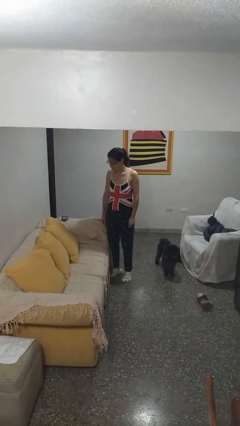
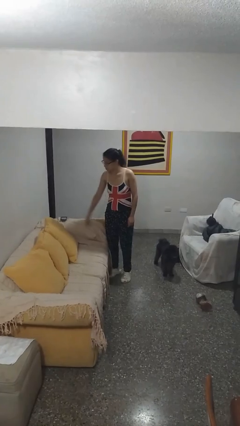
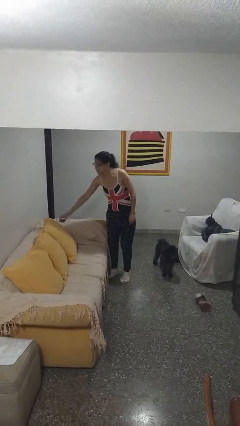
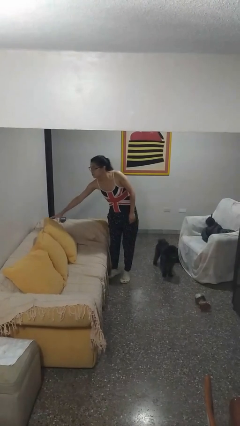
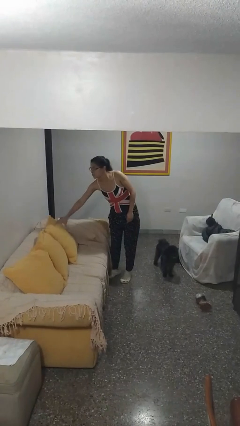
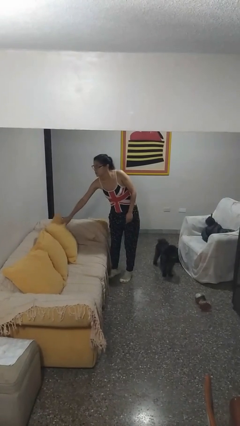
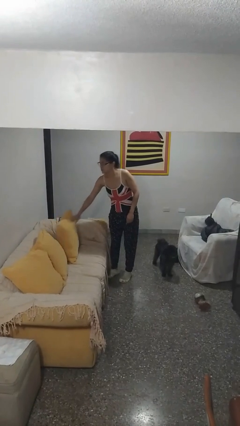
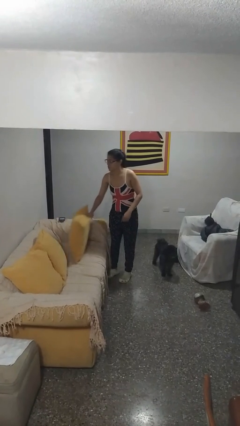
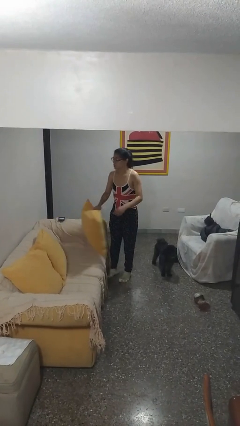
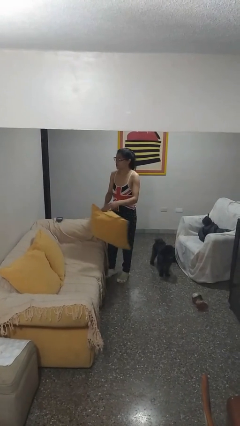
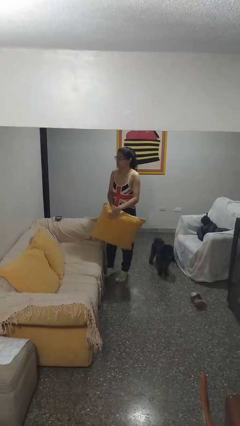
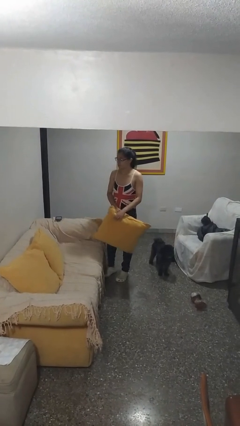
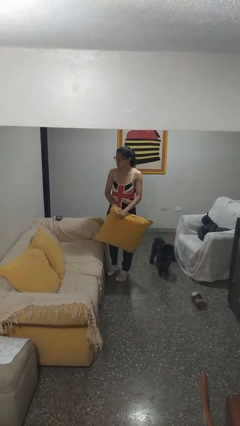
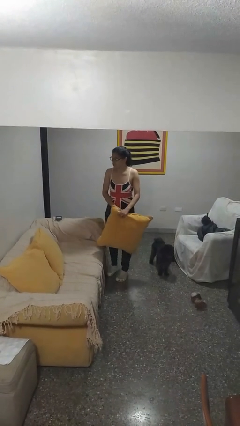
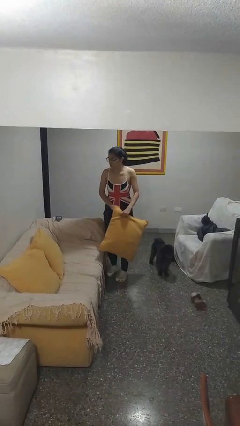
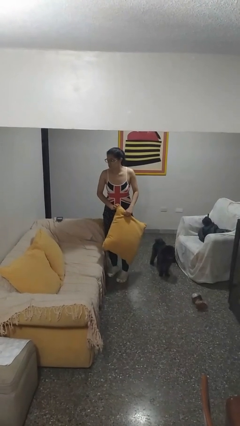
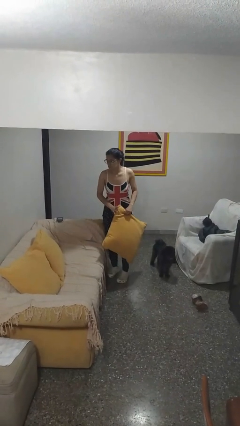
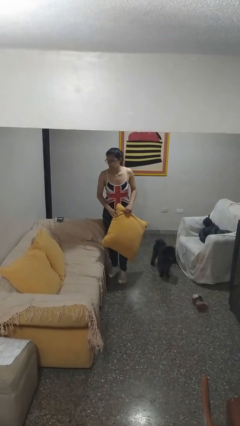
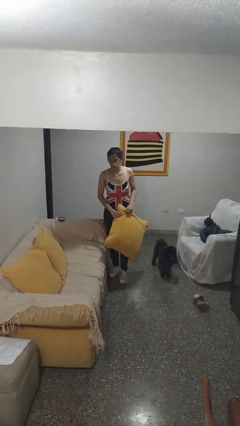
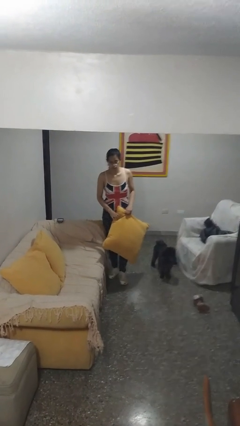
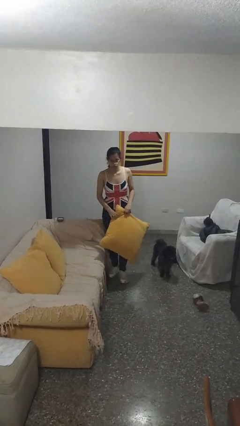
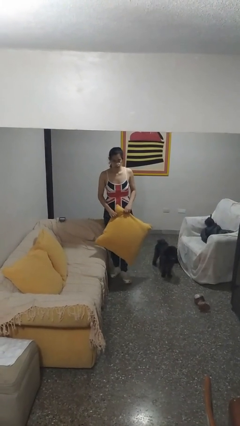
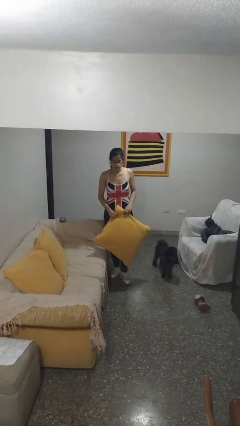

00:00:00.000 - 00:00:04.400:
person picks up object from couch

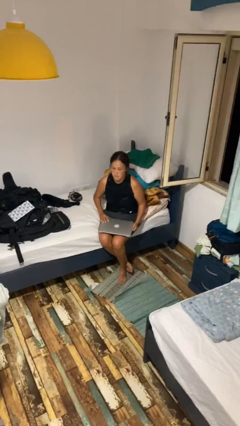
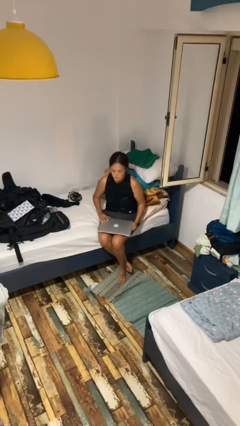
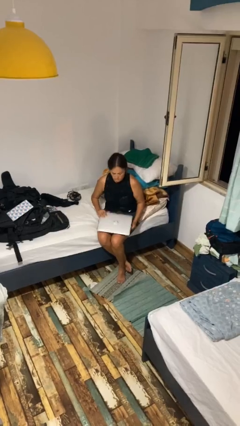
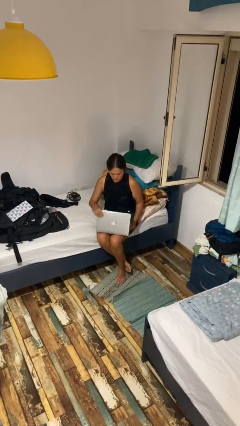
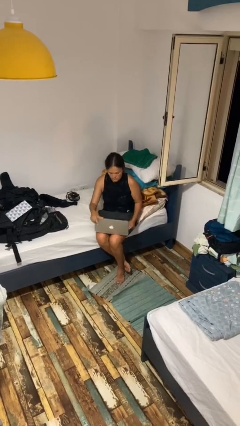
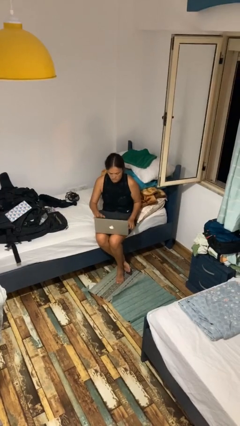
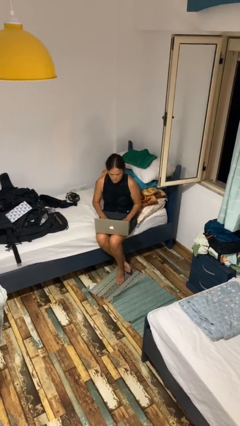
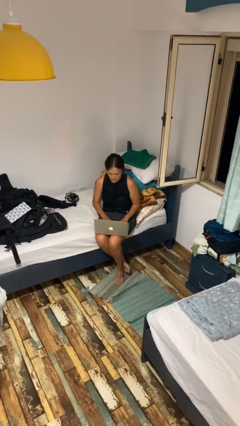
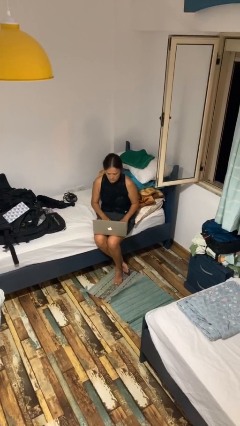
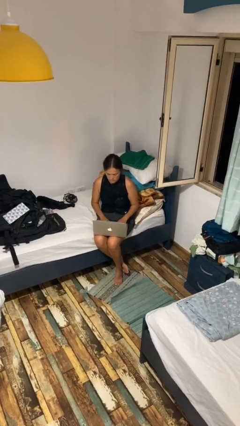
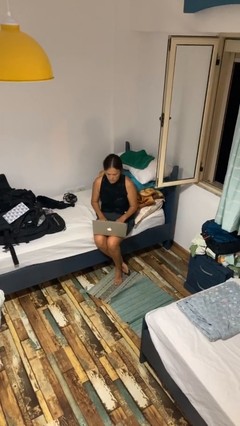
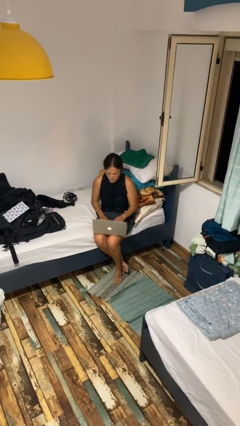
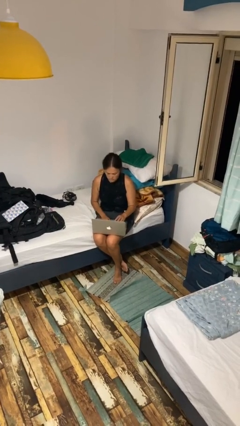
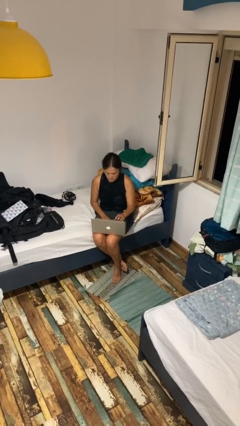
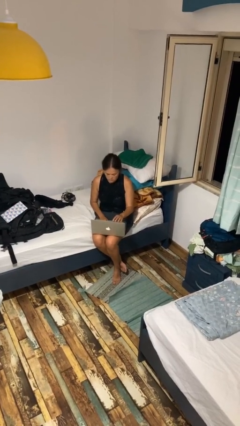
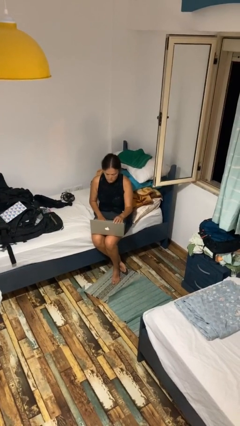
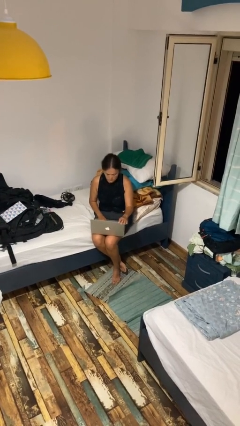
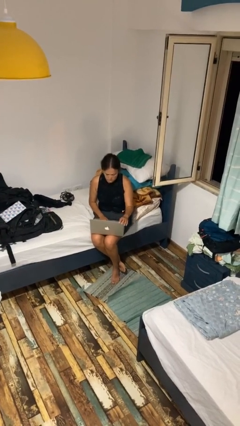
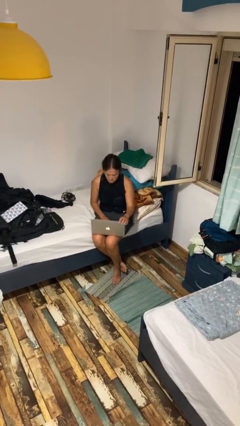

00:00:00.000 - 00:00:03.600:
person opens laptop

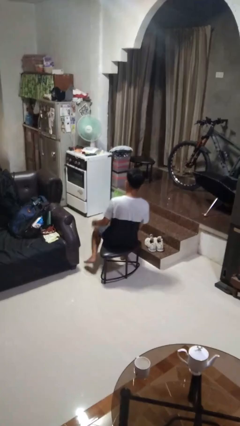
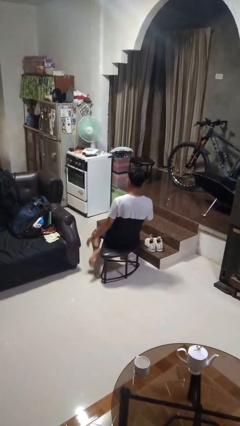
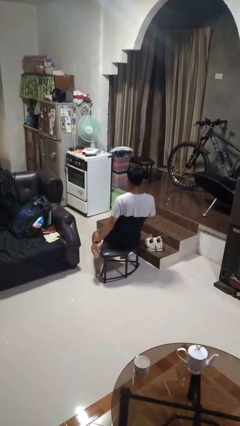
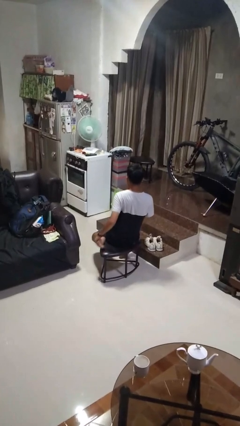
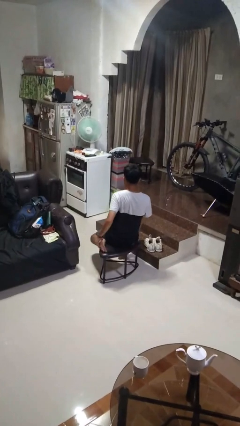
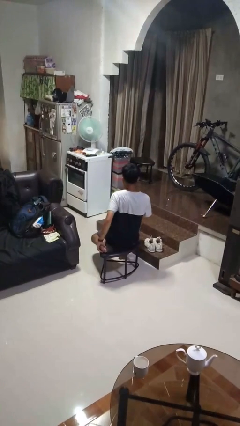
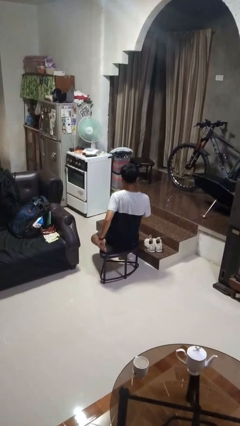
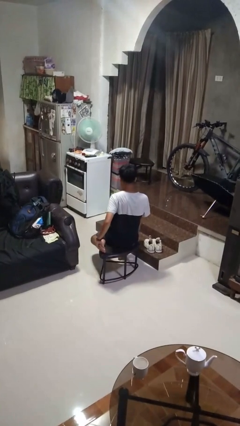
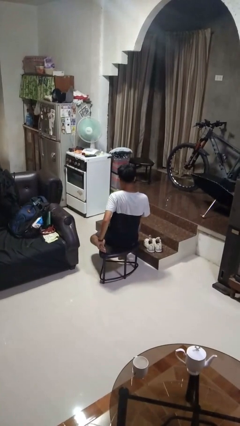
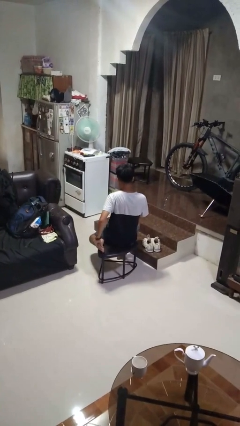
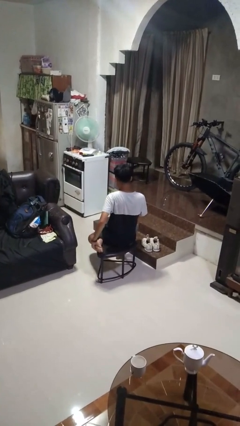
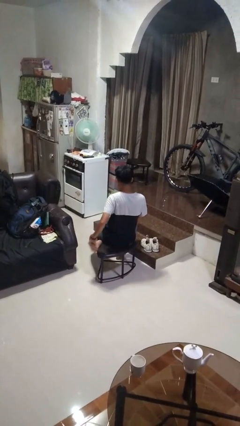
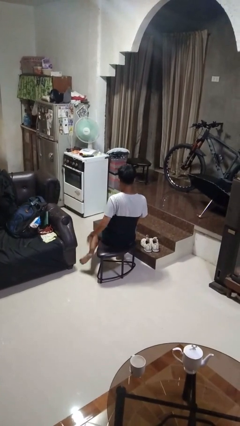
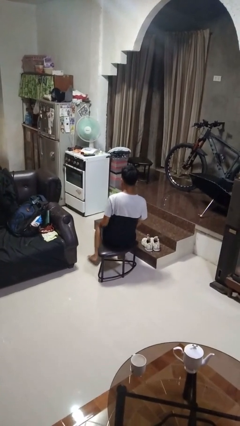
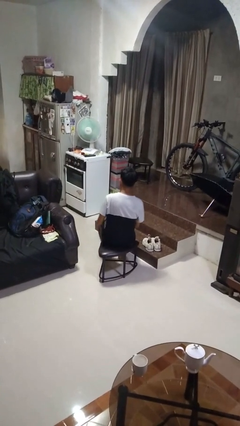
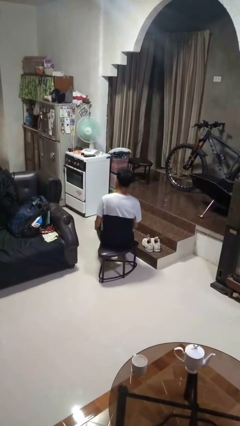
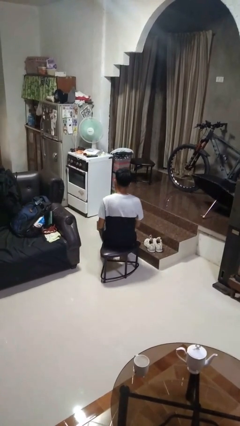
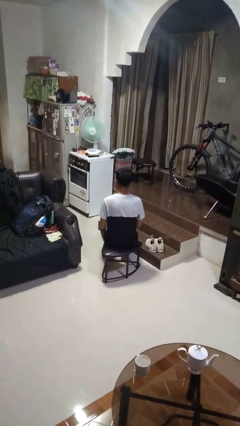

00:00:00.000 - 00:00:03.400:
person rubs foot

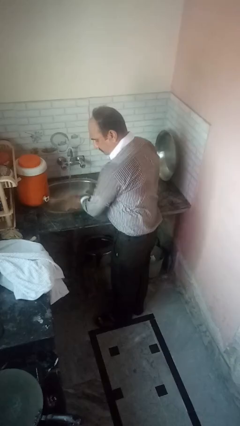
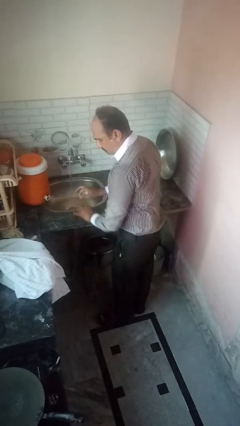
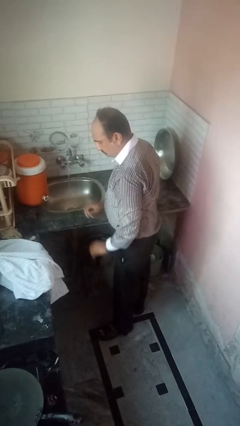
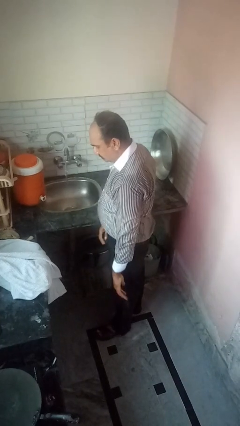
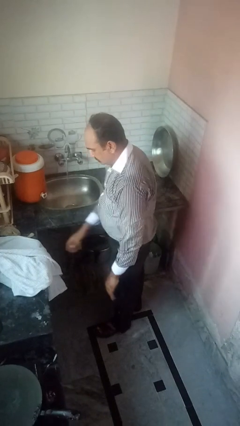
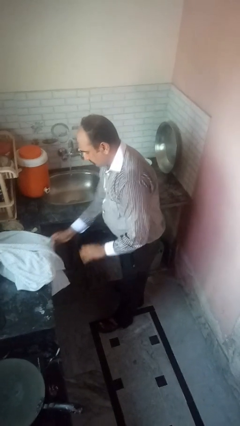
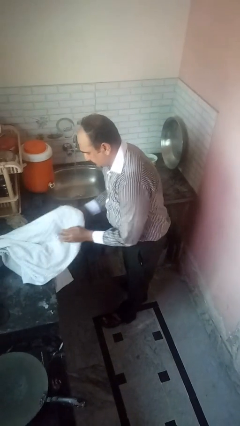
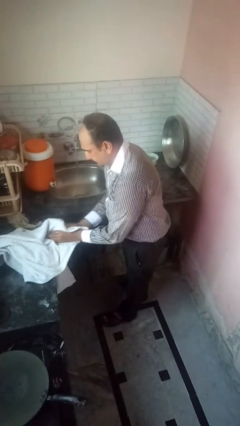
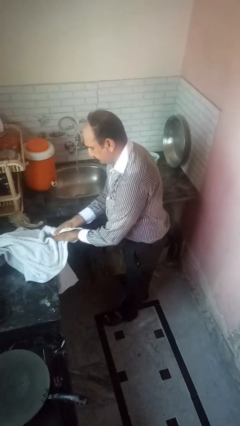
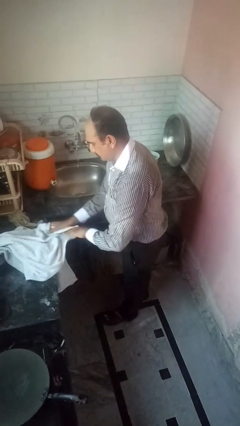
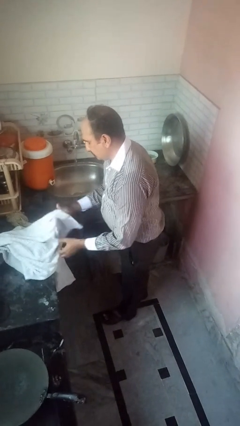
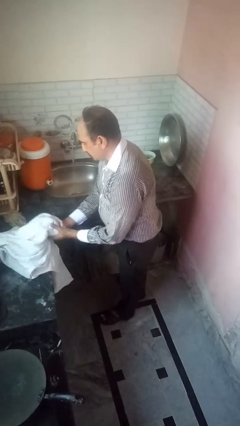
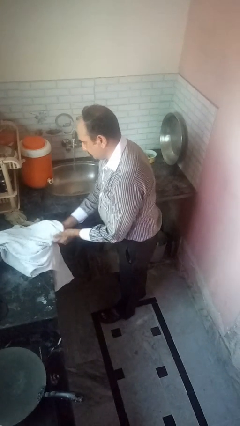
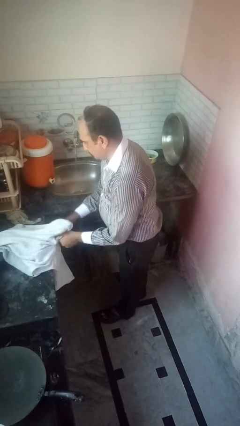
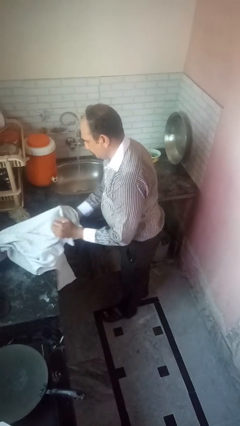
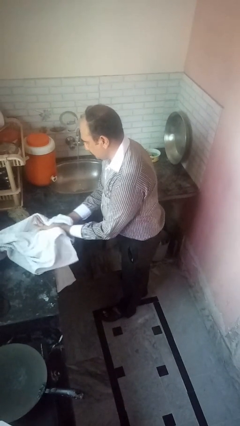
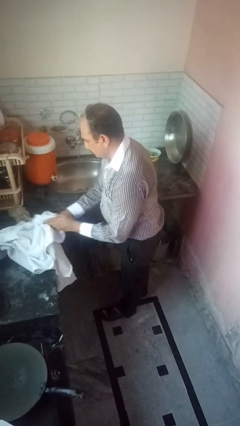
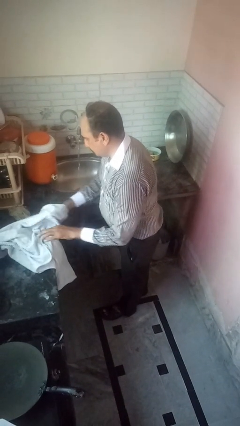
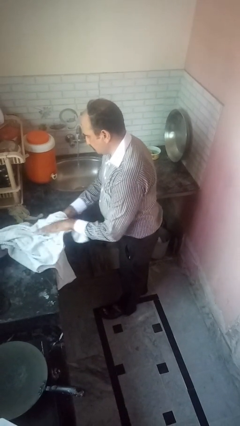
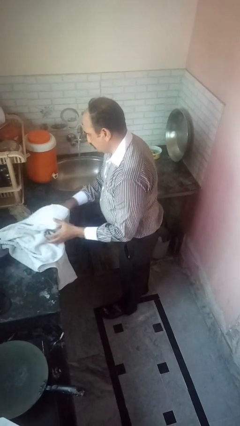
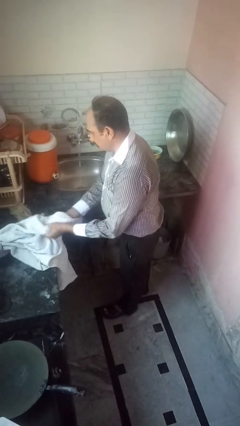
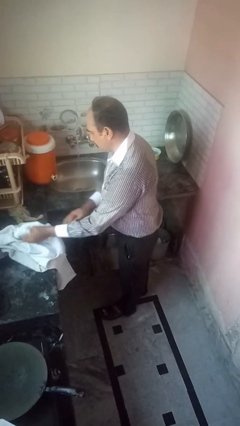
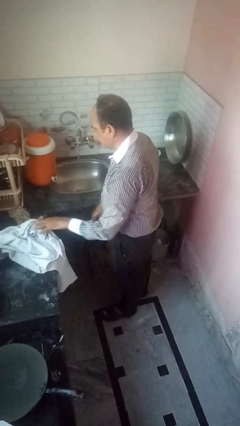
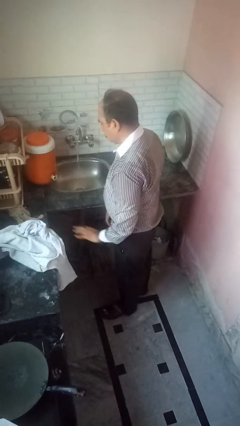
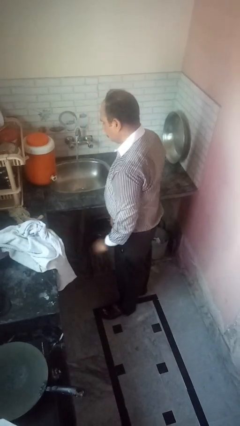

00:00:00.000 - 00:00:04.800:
person dries hands with towel

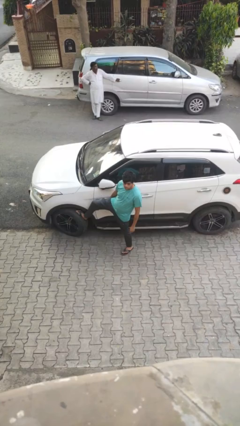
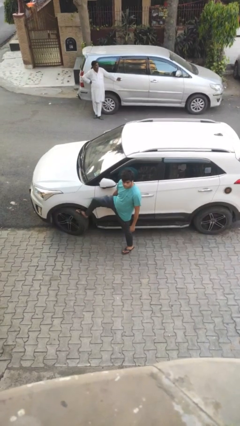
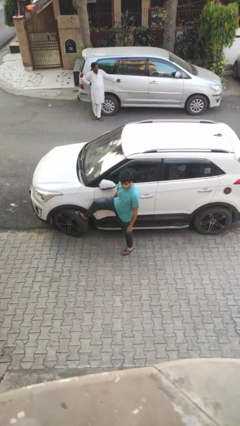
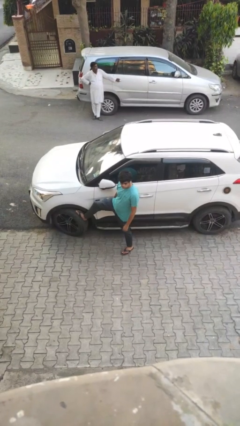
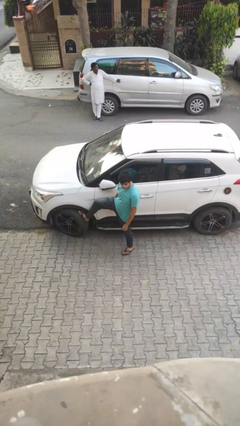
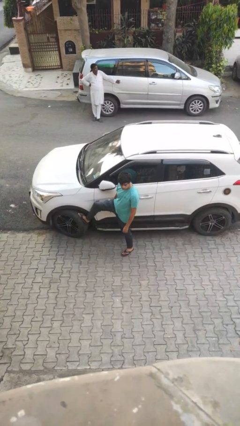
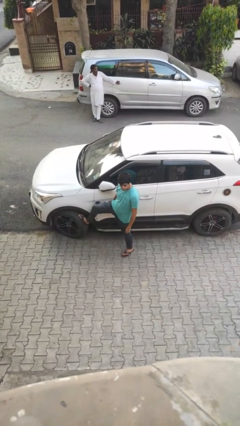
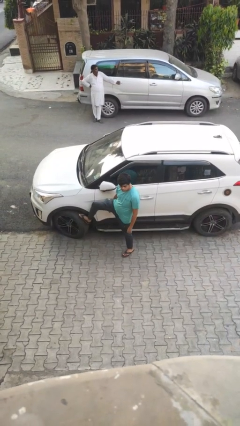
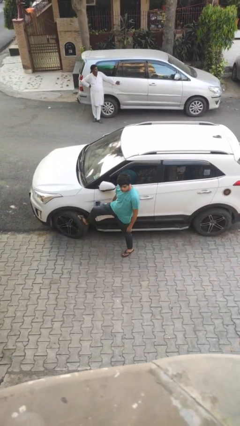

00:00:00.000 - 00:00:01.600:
person kicks car tires
